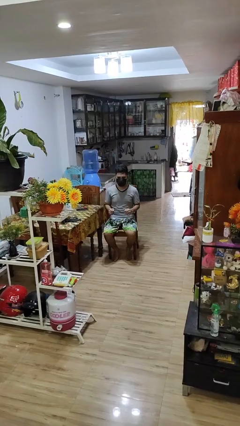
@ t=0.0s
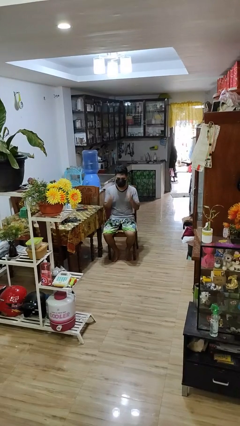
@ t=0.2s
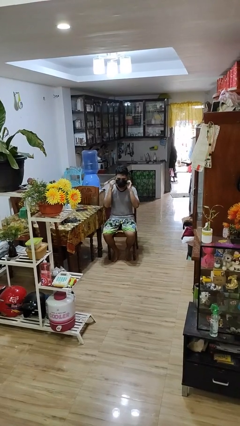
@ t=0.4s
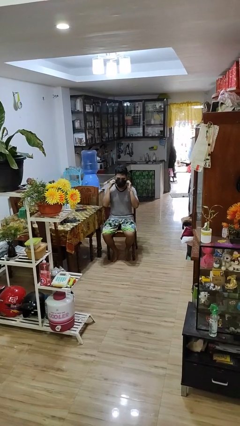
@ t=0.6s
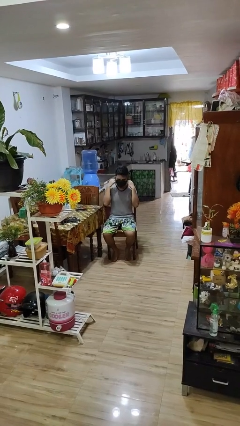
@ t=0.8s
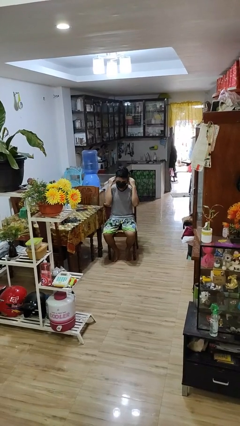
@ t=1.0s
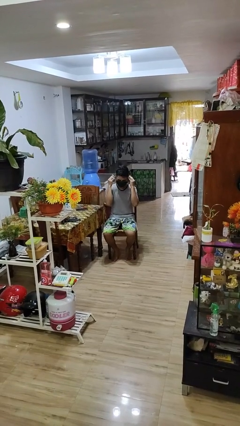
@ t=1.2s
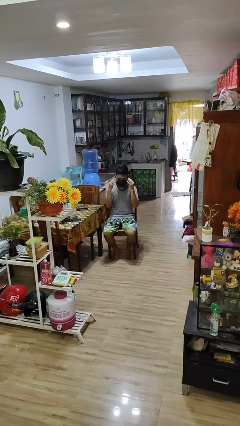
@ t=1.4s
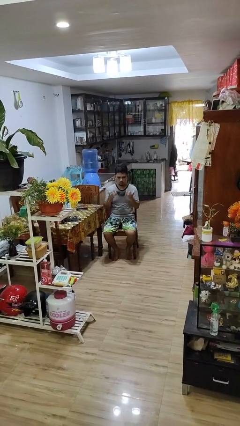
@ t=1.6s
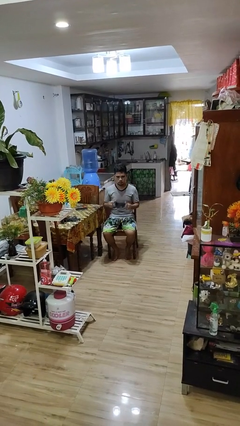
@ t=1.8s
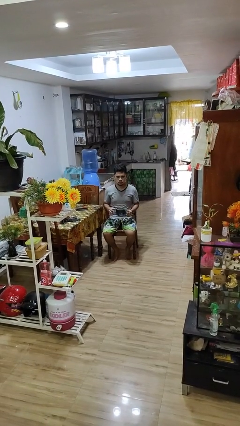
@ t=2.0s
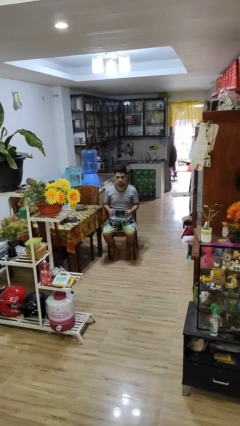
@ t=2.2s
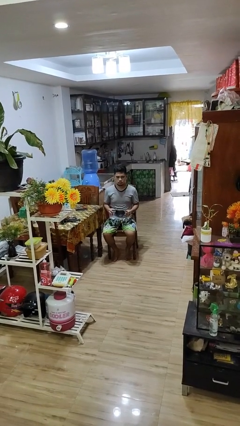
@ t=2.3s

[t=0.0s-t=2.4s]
person takes off facemask

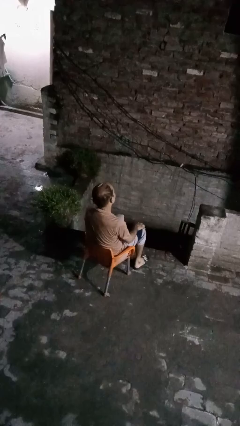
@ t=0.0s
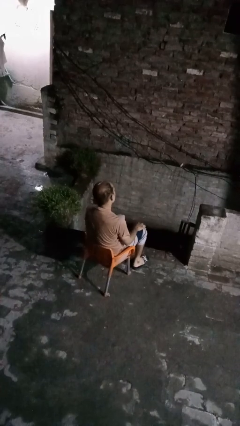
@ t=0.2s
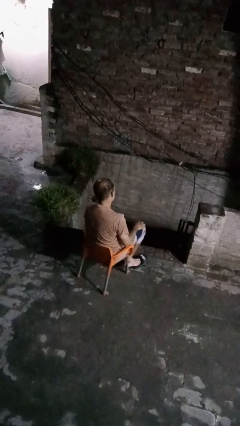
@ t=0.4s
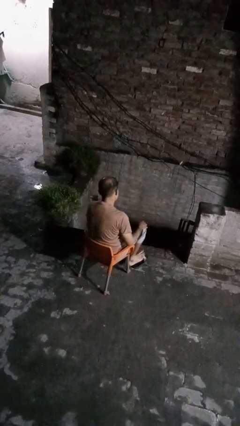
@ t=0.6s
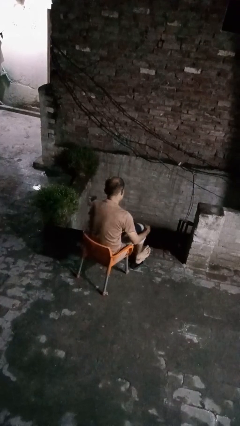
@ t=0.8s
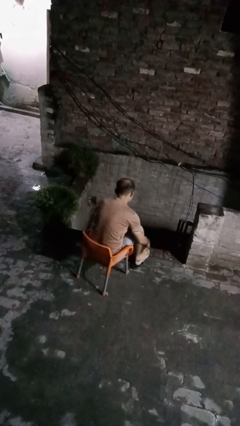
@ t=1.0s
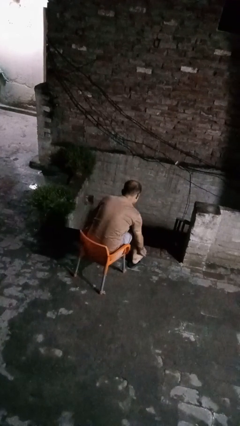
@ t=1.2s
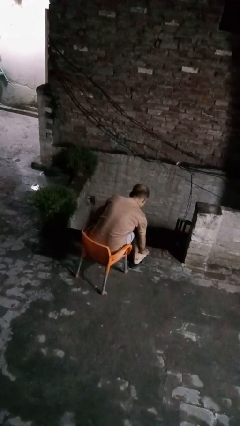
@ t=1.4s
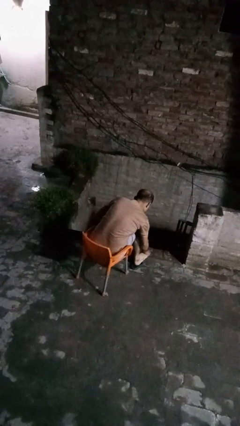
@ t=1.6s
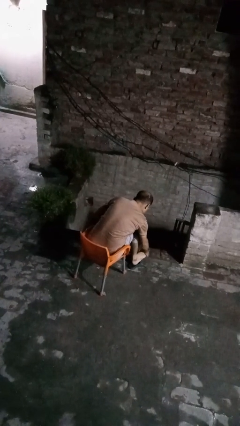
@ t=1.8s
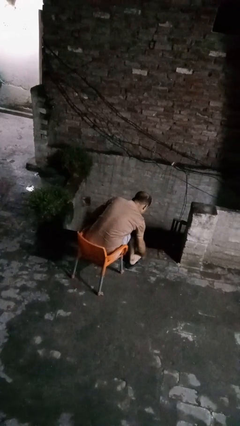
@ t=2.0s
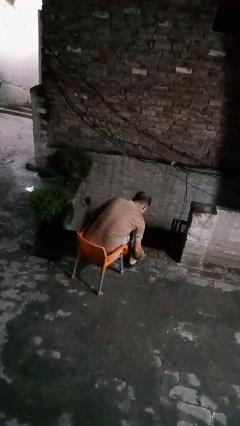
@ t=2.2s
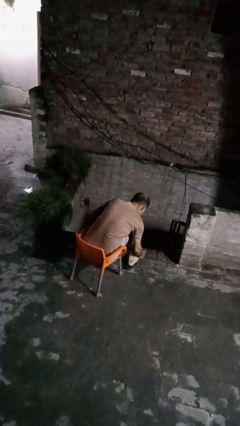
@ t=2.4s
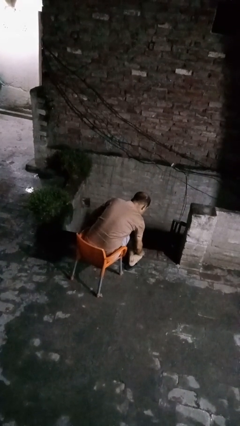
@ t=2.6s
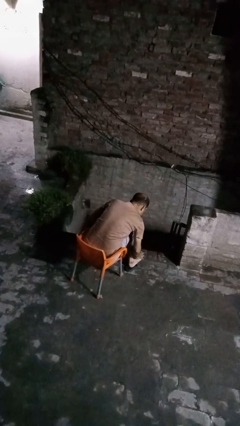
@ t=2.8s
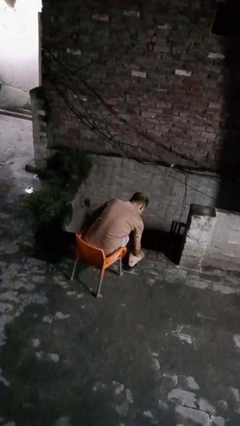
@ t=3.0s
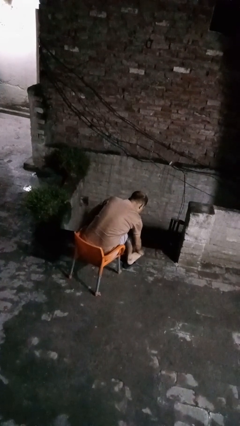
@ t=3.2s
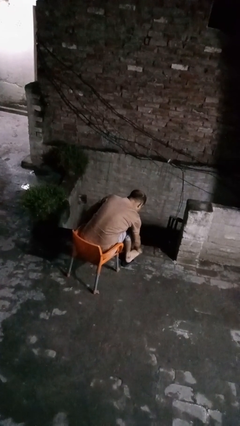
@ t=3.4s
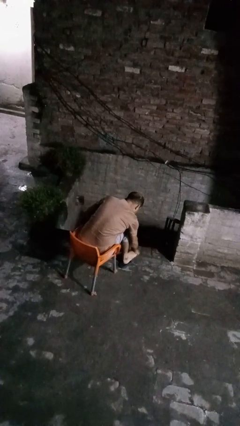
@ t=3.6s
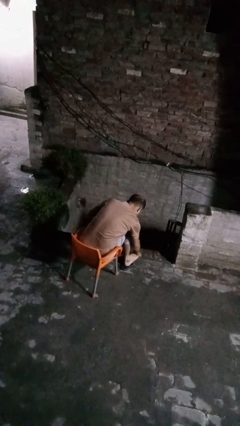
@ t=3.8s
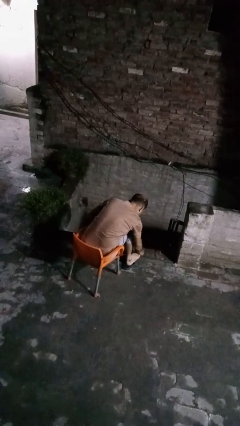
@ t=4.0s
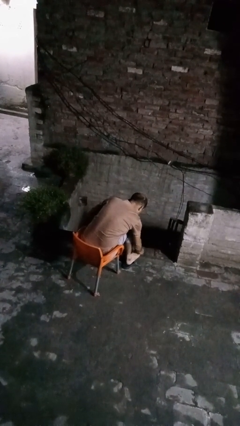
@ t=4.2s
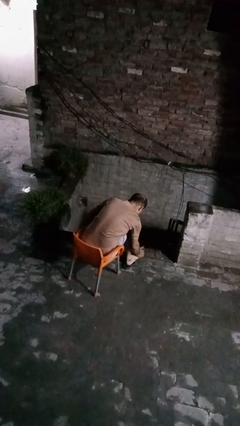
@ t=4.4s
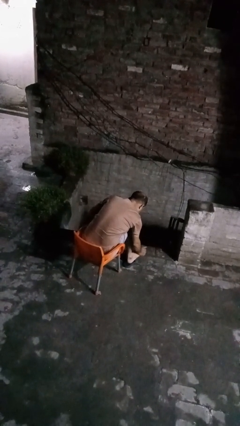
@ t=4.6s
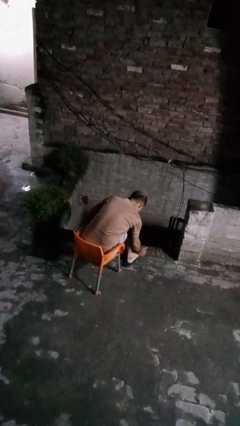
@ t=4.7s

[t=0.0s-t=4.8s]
person rubs foot

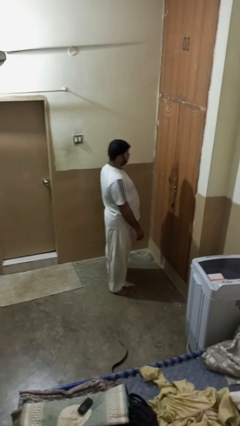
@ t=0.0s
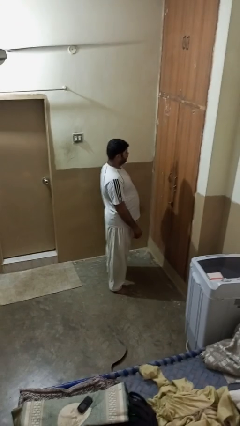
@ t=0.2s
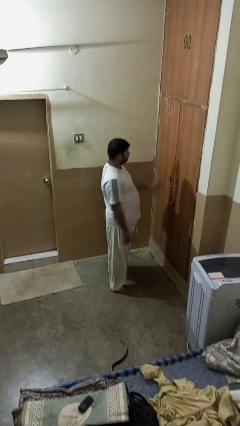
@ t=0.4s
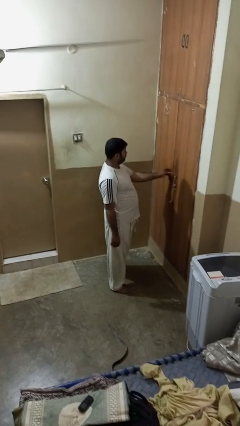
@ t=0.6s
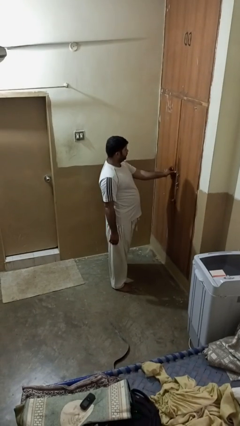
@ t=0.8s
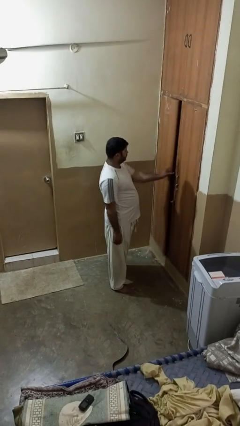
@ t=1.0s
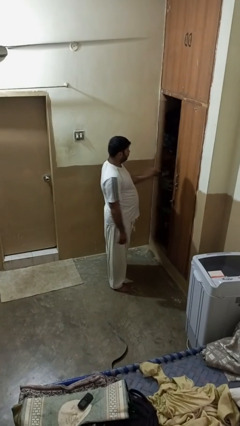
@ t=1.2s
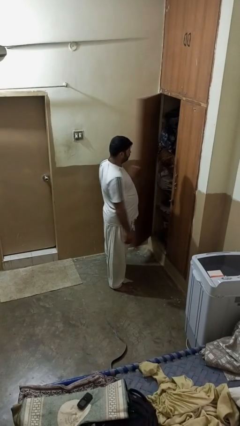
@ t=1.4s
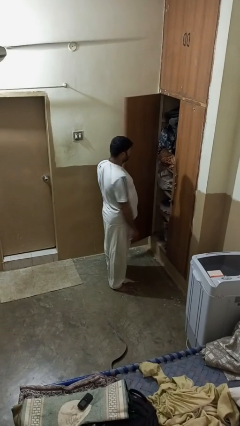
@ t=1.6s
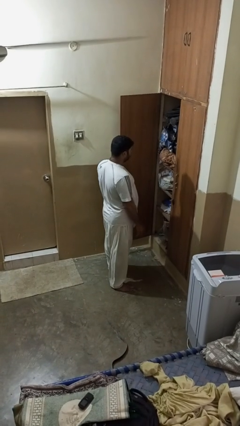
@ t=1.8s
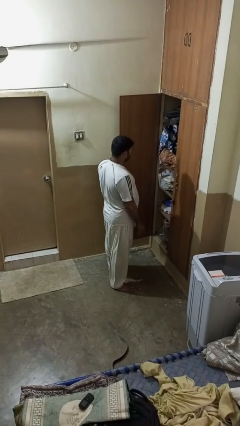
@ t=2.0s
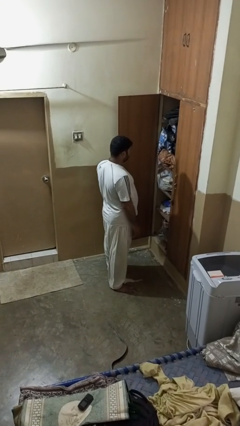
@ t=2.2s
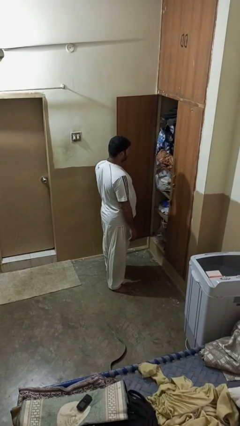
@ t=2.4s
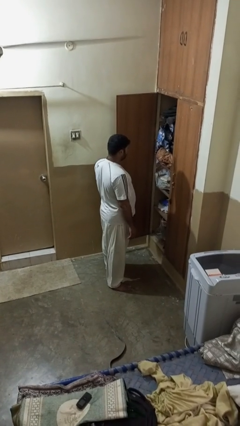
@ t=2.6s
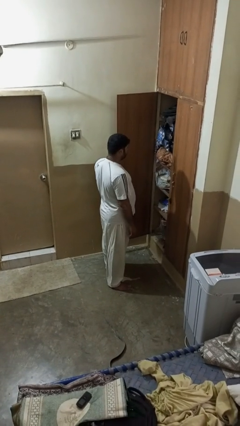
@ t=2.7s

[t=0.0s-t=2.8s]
person opens closet door

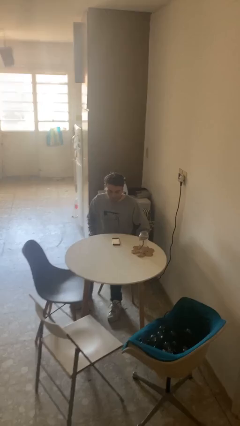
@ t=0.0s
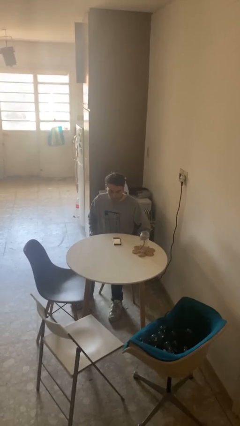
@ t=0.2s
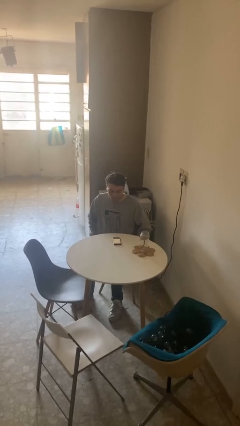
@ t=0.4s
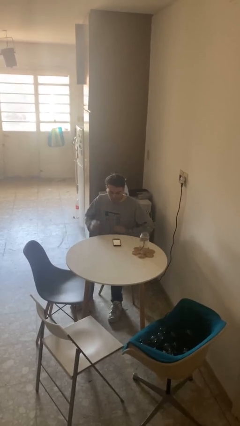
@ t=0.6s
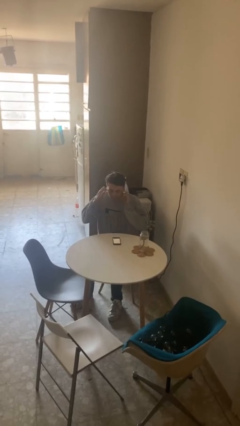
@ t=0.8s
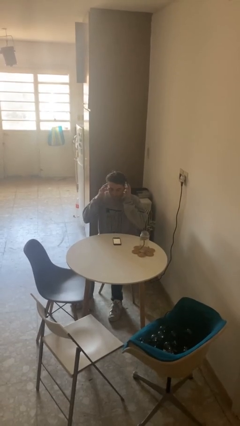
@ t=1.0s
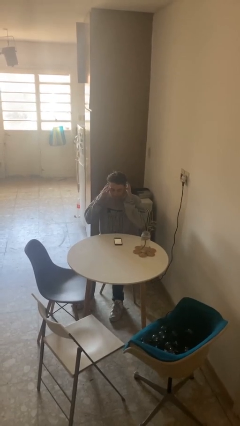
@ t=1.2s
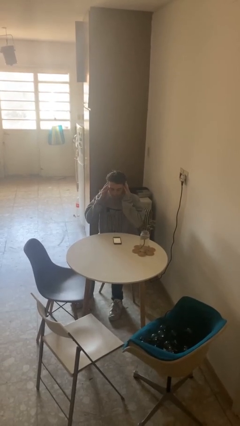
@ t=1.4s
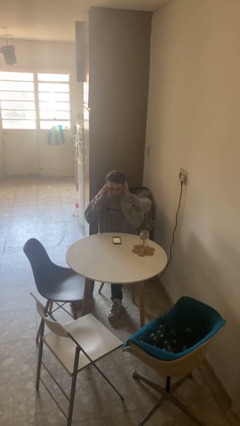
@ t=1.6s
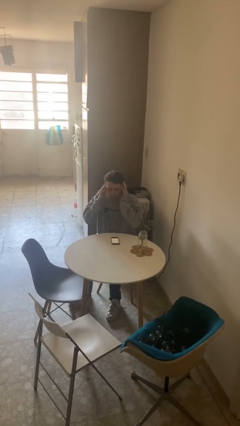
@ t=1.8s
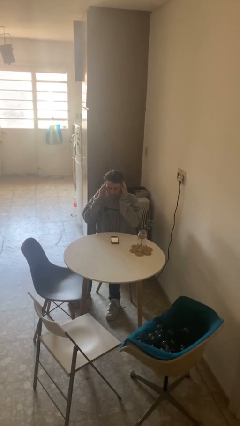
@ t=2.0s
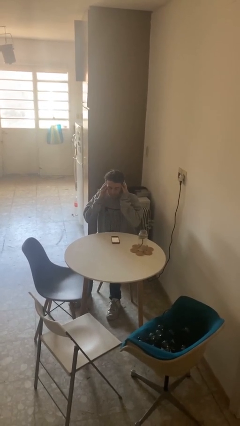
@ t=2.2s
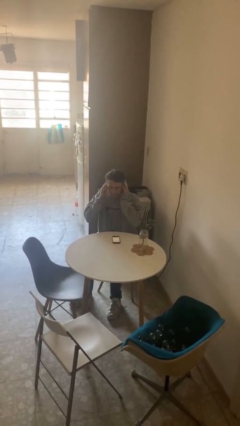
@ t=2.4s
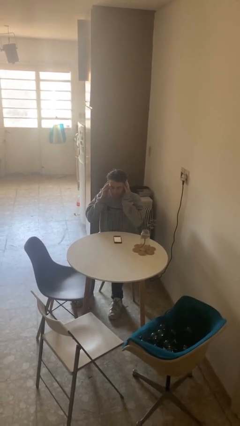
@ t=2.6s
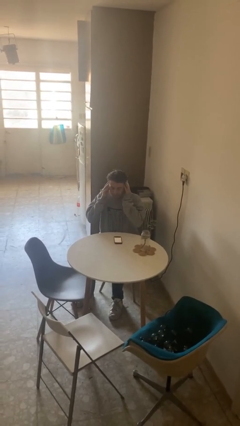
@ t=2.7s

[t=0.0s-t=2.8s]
person puts fingers in ear

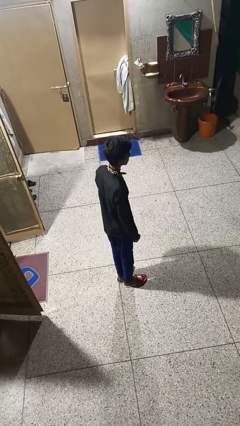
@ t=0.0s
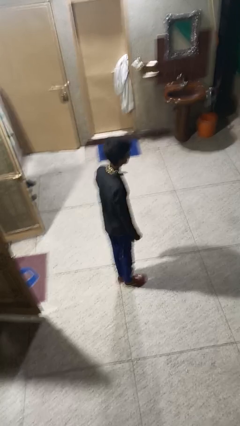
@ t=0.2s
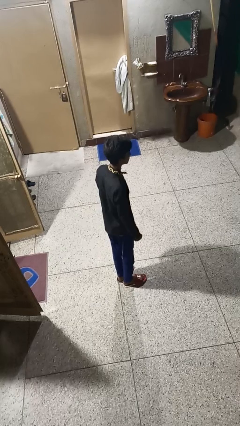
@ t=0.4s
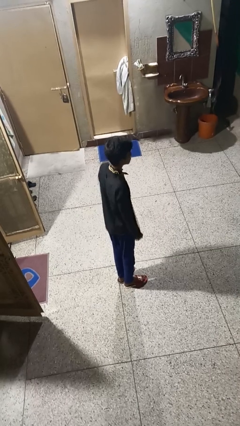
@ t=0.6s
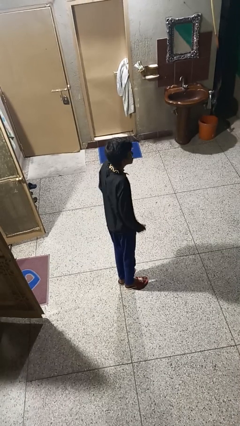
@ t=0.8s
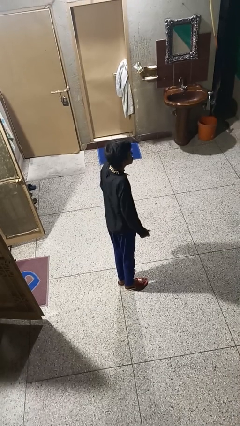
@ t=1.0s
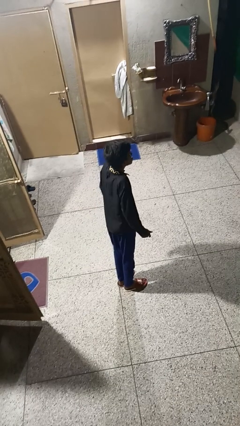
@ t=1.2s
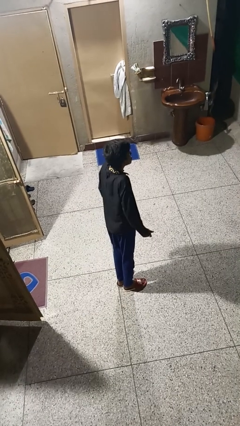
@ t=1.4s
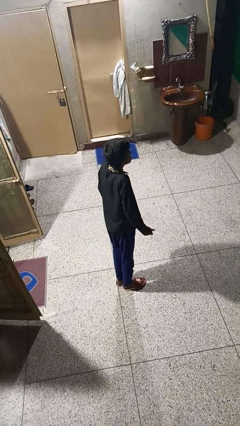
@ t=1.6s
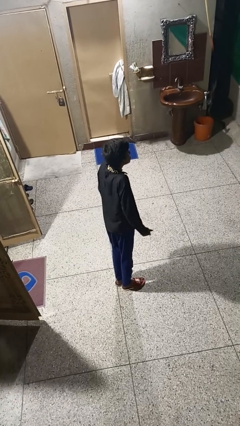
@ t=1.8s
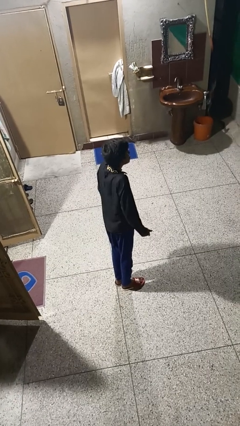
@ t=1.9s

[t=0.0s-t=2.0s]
person shrugs

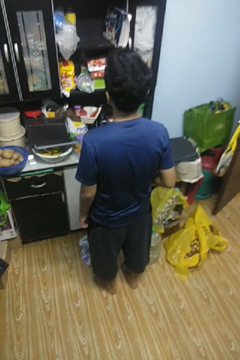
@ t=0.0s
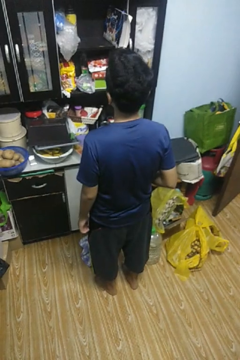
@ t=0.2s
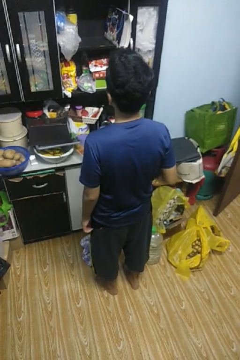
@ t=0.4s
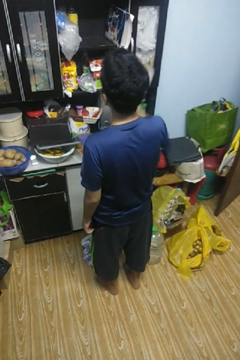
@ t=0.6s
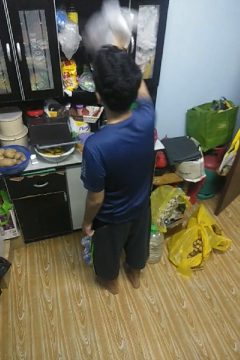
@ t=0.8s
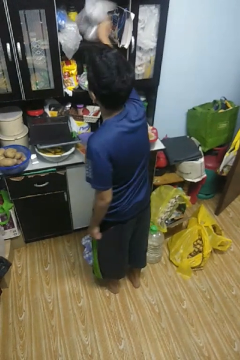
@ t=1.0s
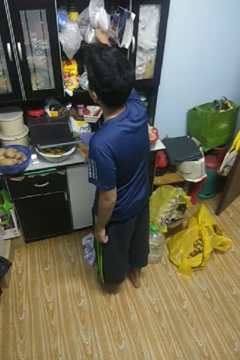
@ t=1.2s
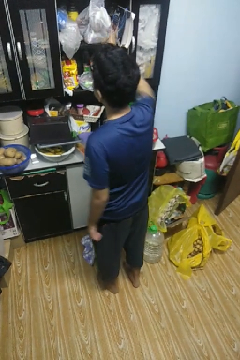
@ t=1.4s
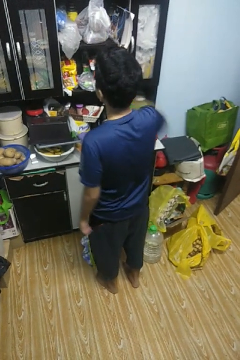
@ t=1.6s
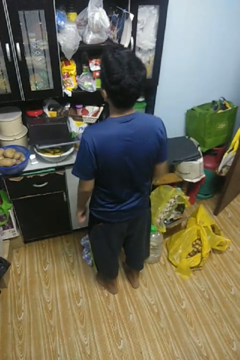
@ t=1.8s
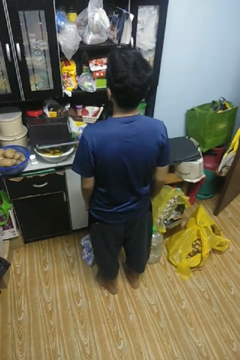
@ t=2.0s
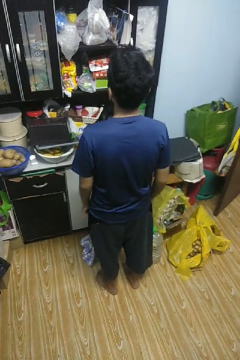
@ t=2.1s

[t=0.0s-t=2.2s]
person loads groceries into cabinet

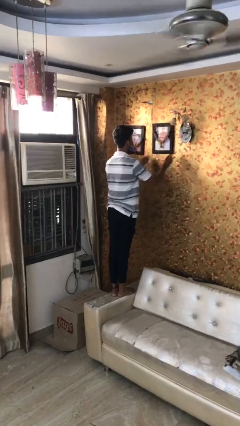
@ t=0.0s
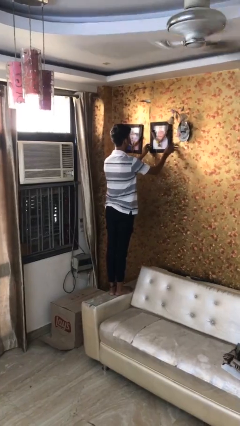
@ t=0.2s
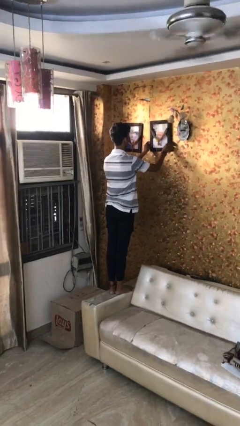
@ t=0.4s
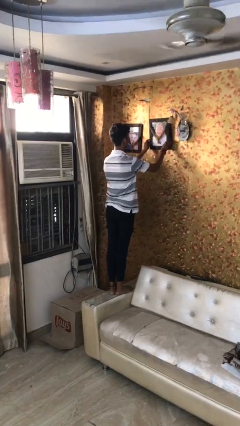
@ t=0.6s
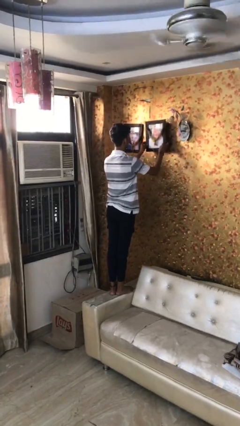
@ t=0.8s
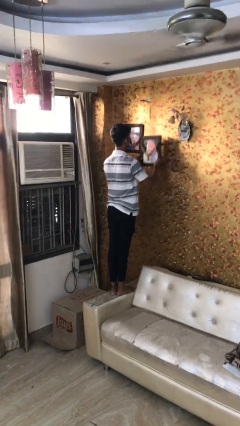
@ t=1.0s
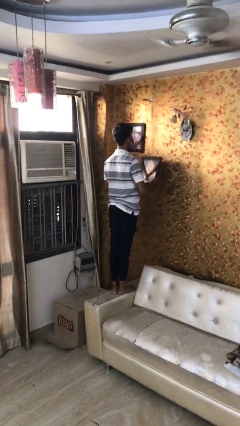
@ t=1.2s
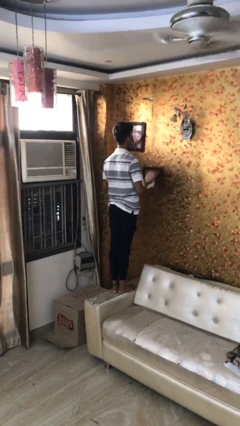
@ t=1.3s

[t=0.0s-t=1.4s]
person takes down picture frame
